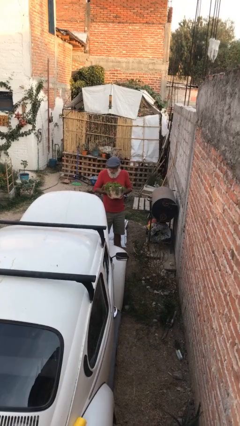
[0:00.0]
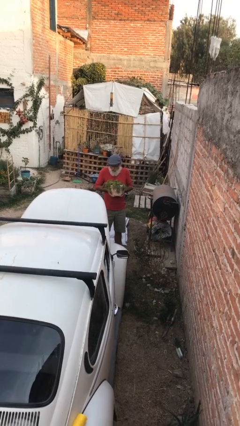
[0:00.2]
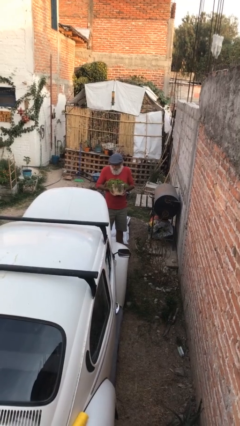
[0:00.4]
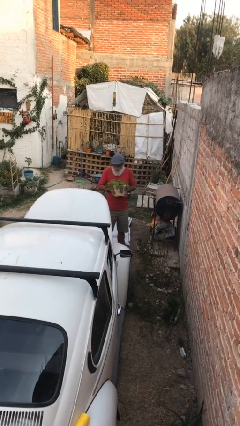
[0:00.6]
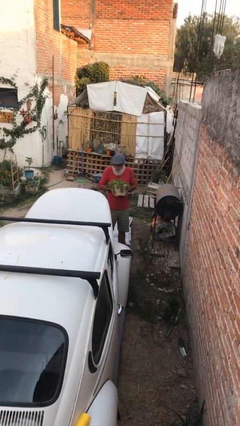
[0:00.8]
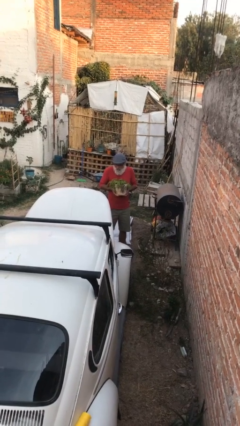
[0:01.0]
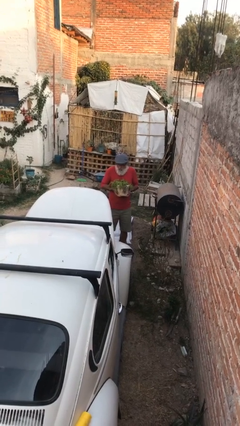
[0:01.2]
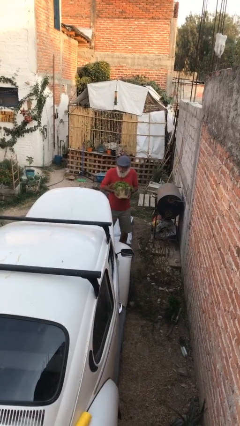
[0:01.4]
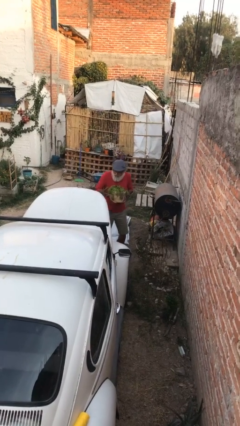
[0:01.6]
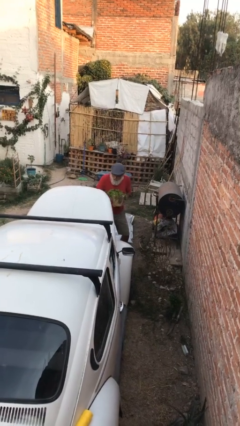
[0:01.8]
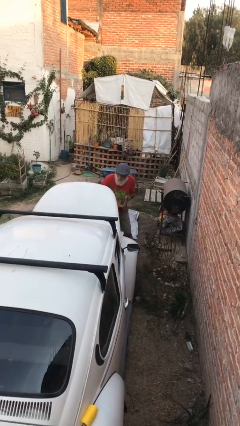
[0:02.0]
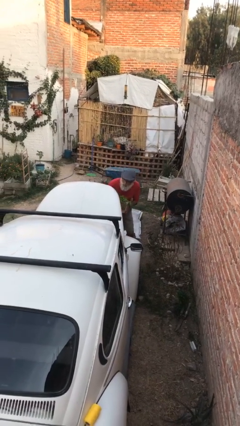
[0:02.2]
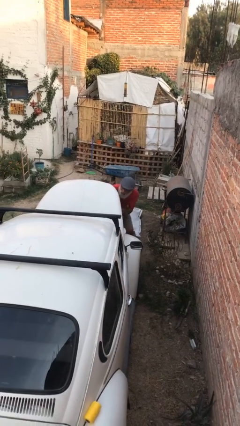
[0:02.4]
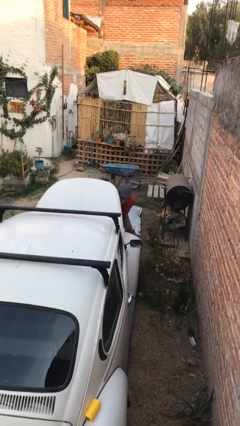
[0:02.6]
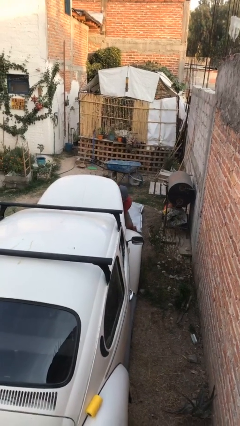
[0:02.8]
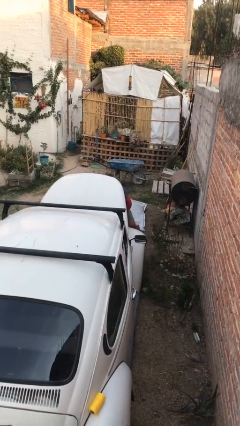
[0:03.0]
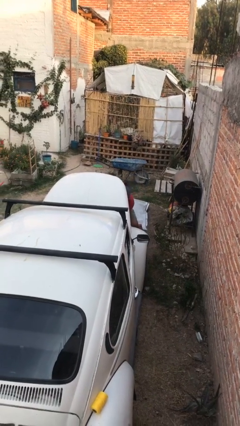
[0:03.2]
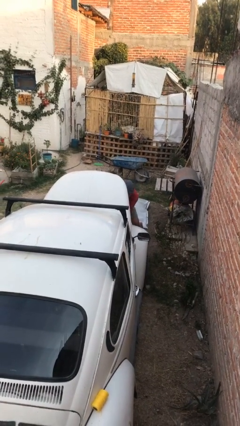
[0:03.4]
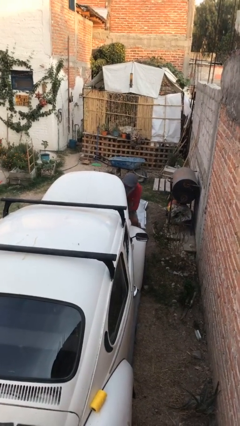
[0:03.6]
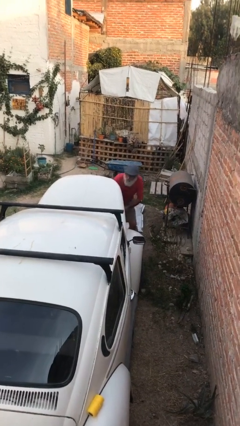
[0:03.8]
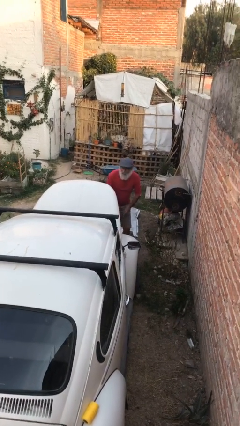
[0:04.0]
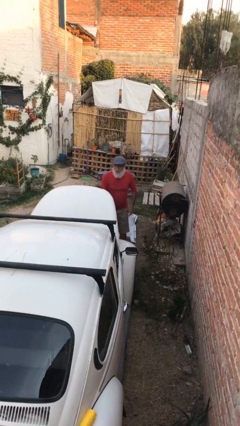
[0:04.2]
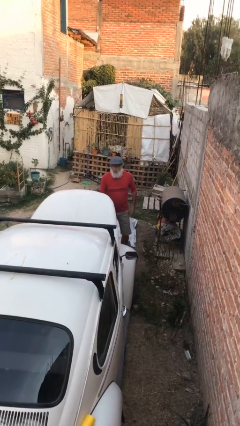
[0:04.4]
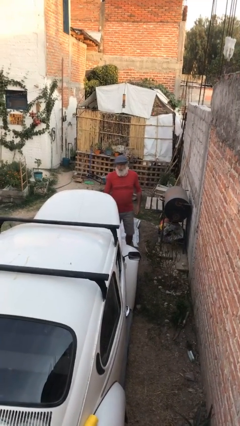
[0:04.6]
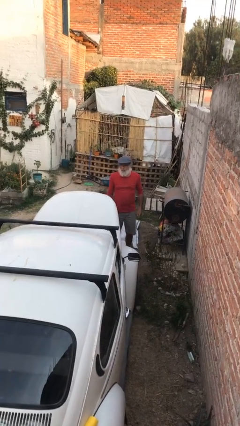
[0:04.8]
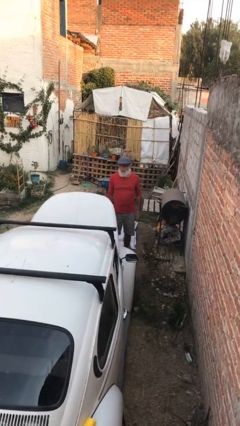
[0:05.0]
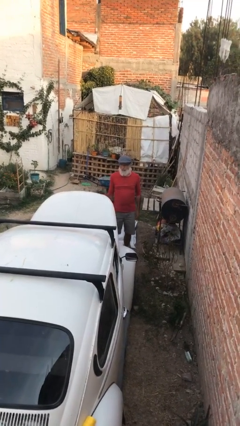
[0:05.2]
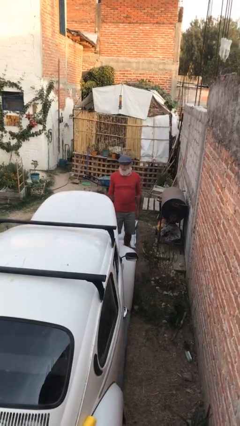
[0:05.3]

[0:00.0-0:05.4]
person loads car

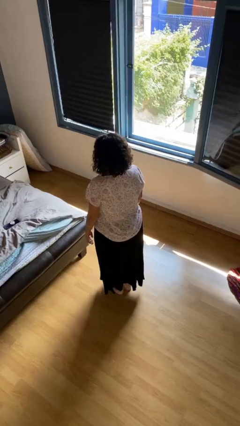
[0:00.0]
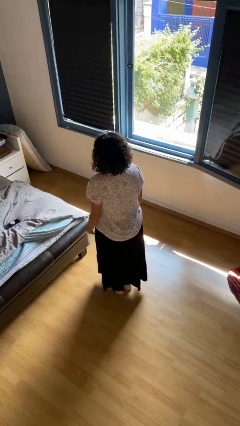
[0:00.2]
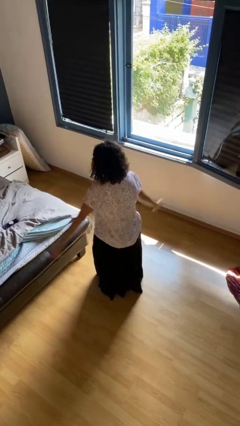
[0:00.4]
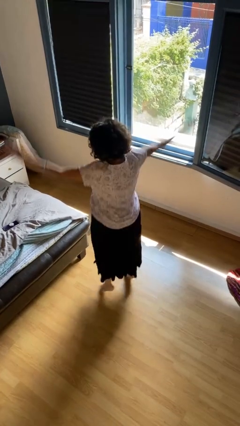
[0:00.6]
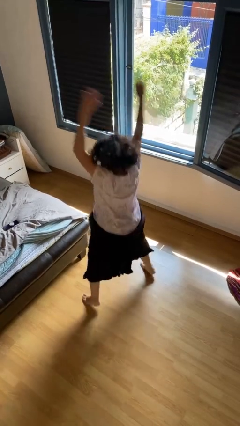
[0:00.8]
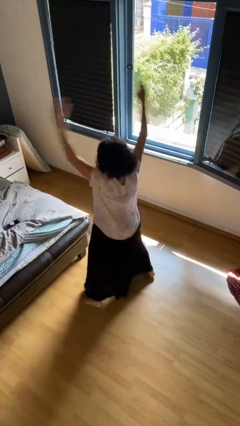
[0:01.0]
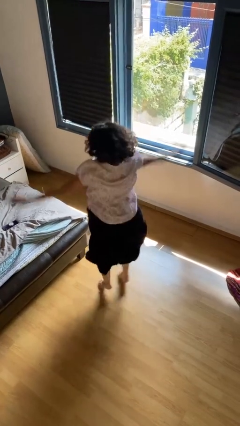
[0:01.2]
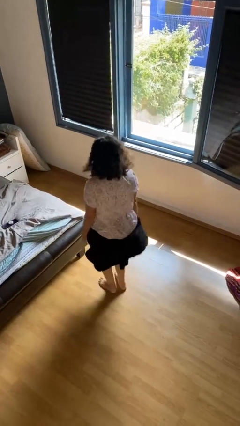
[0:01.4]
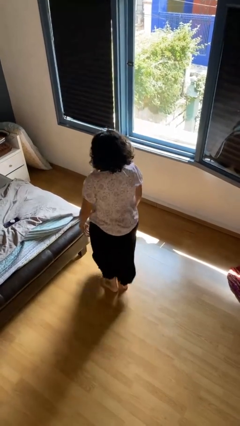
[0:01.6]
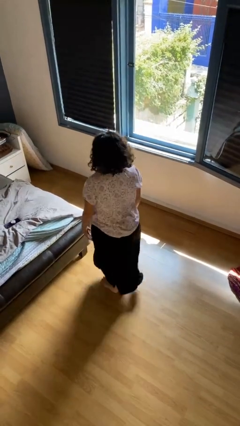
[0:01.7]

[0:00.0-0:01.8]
person exercises with jumping jacks

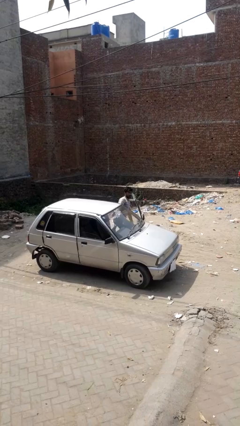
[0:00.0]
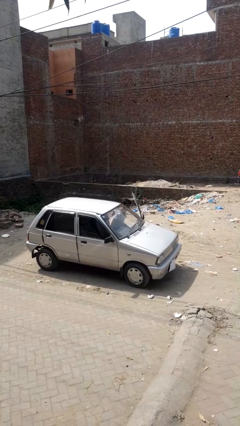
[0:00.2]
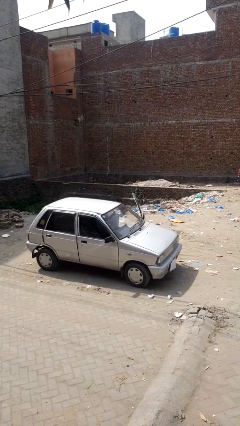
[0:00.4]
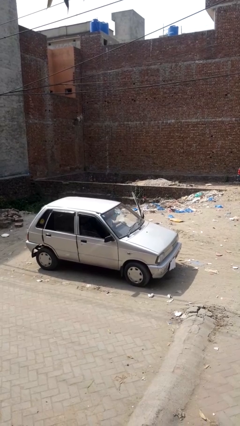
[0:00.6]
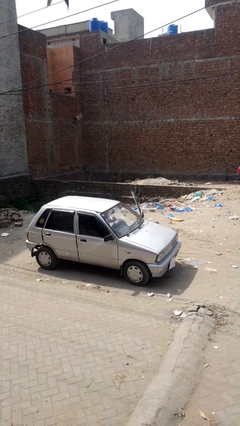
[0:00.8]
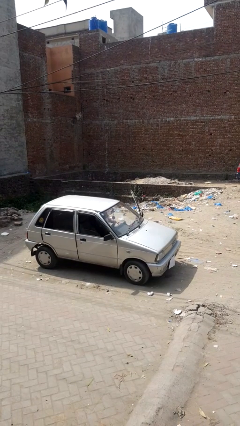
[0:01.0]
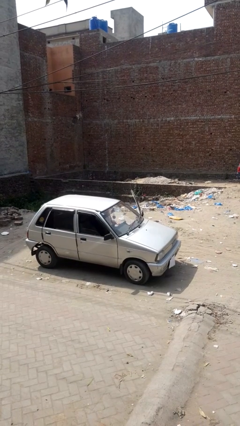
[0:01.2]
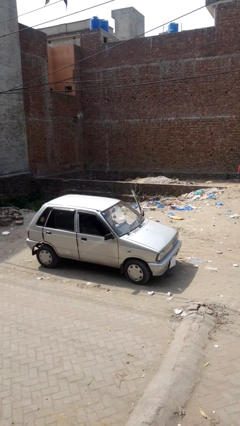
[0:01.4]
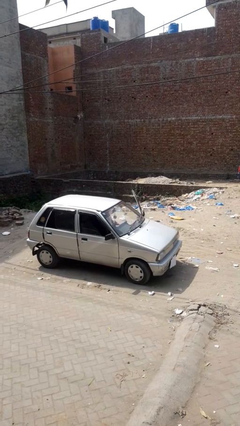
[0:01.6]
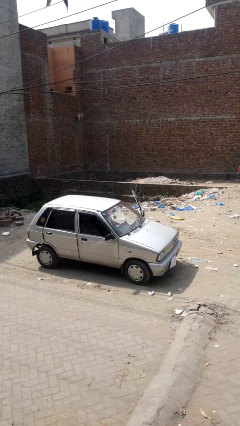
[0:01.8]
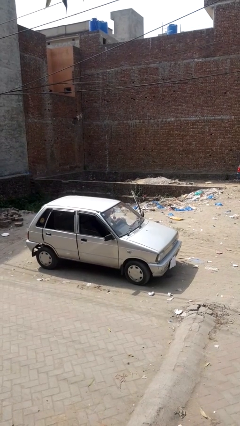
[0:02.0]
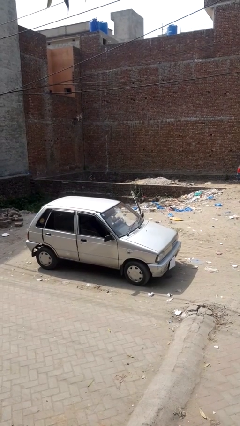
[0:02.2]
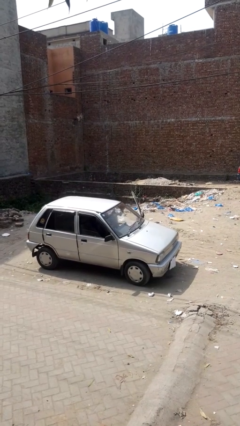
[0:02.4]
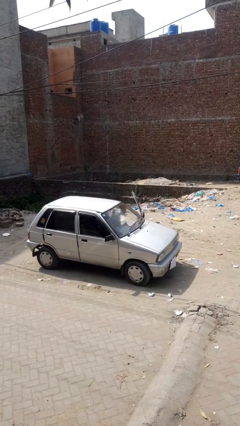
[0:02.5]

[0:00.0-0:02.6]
person enters car

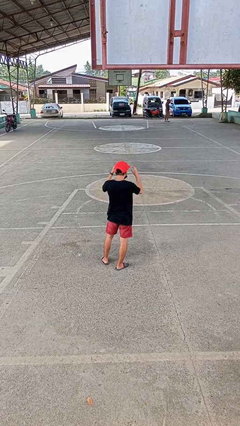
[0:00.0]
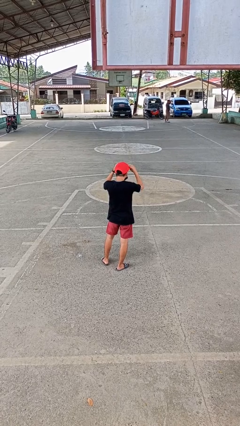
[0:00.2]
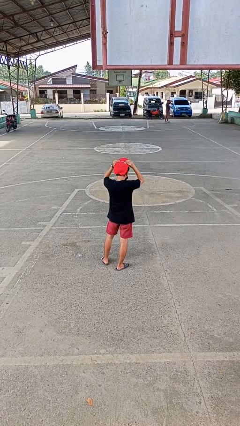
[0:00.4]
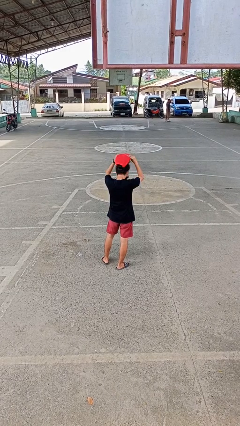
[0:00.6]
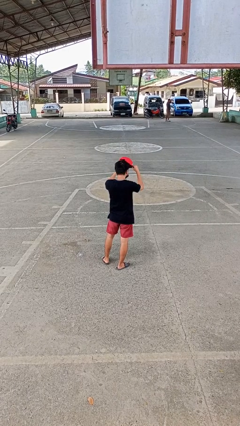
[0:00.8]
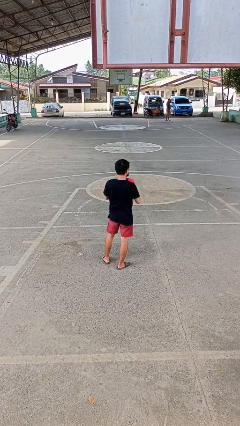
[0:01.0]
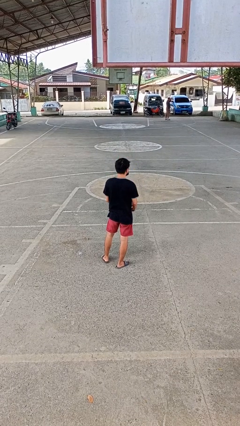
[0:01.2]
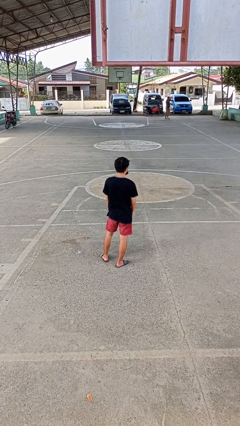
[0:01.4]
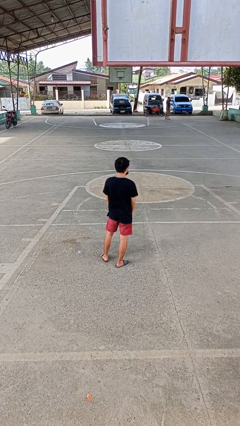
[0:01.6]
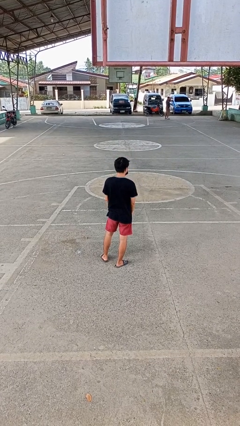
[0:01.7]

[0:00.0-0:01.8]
person takes off hat

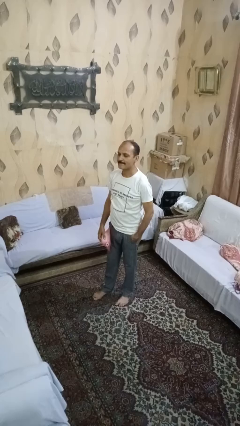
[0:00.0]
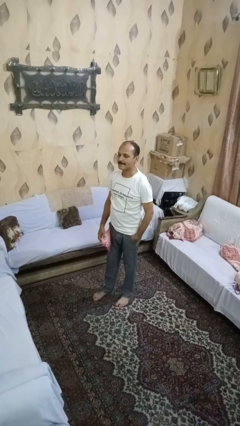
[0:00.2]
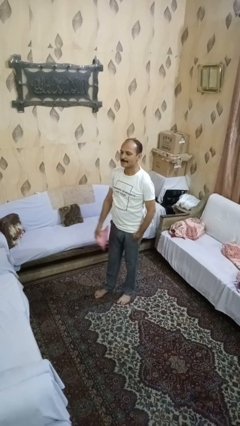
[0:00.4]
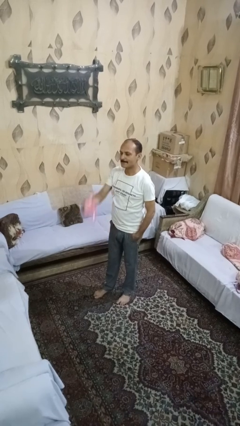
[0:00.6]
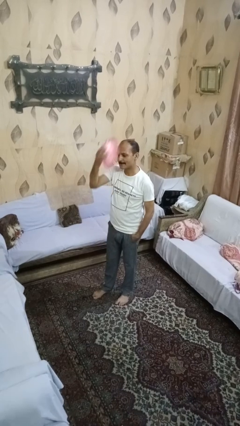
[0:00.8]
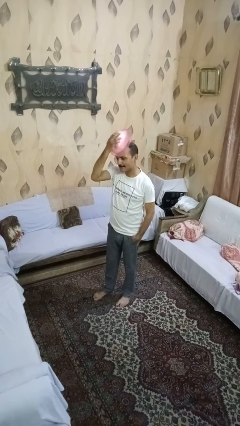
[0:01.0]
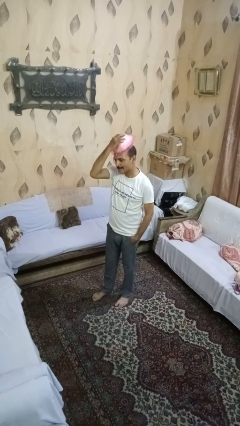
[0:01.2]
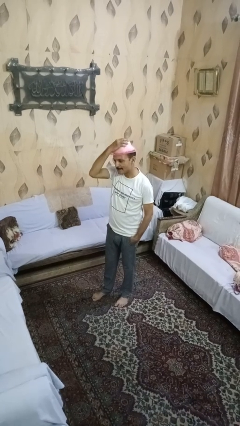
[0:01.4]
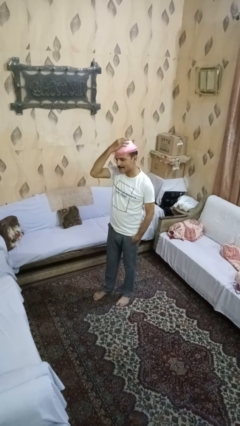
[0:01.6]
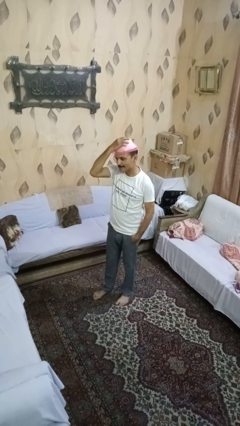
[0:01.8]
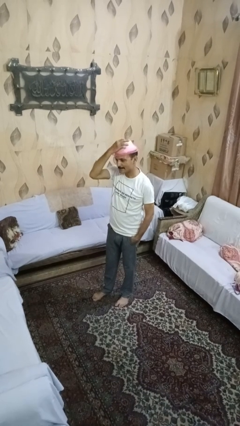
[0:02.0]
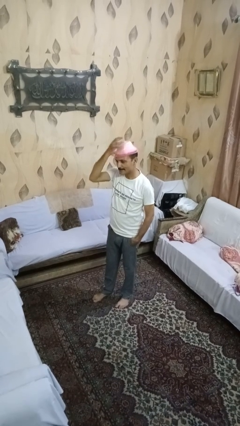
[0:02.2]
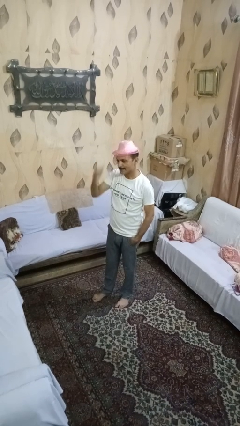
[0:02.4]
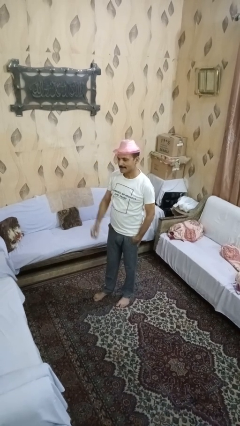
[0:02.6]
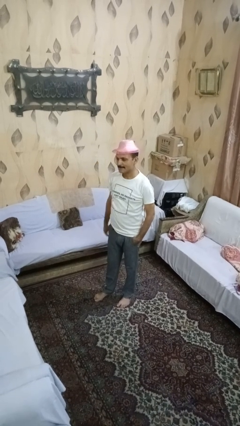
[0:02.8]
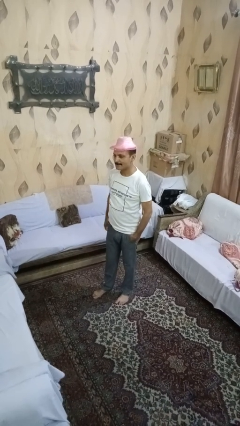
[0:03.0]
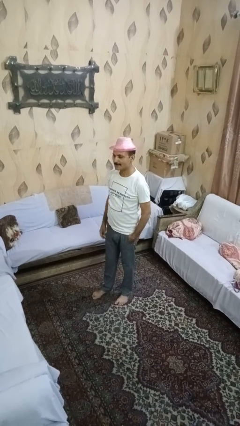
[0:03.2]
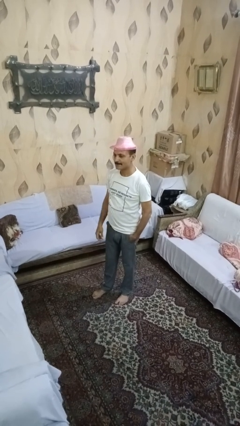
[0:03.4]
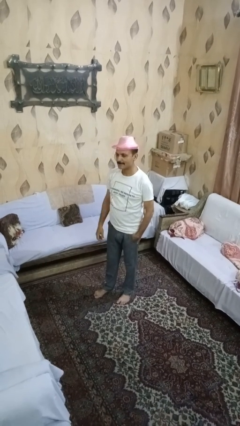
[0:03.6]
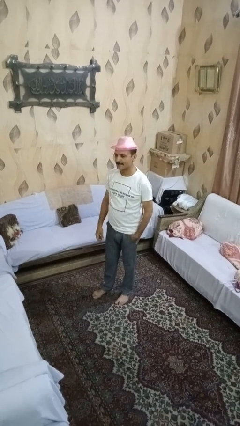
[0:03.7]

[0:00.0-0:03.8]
person puts on hat

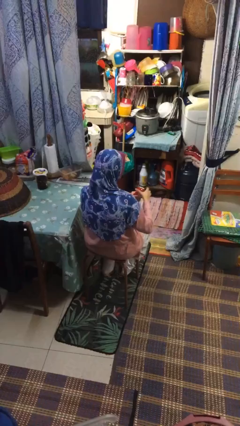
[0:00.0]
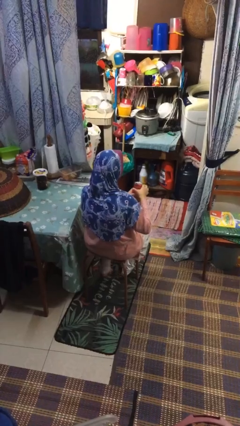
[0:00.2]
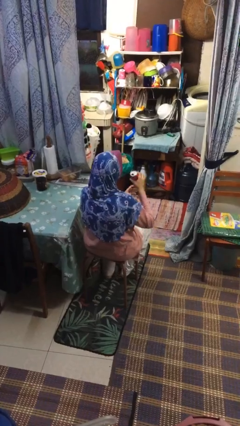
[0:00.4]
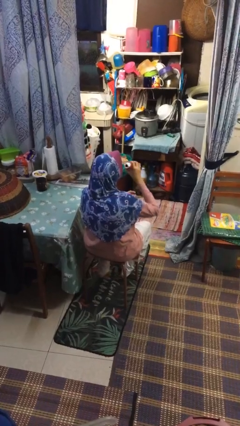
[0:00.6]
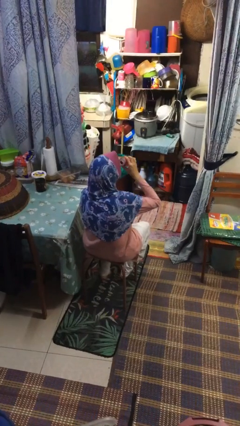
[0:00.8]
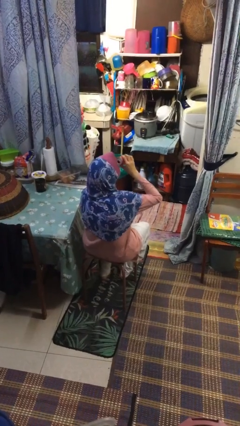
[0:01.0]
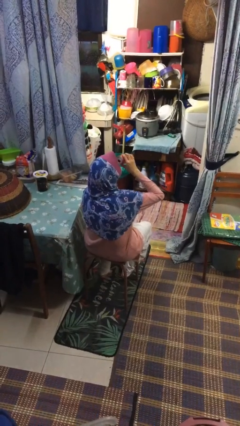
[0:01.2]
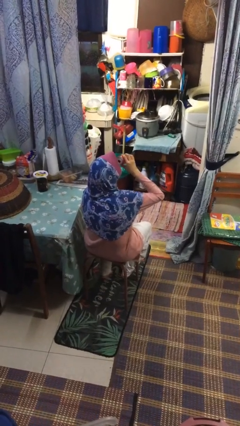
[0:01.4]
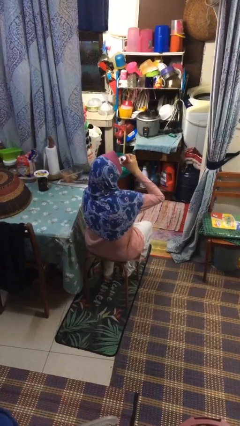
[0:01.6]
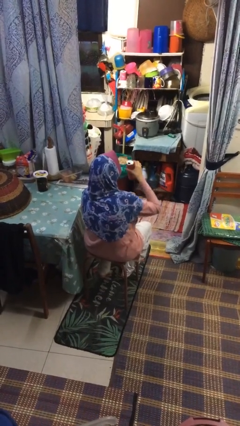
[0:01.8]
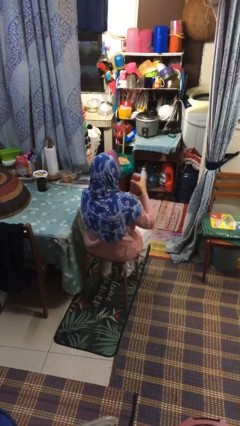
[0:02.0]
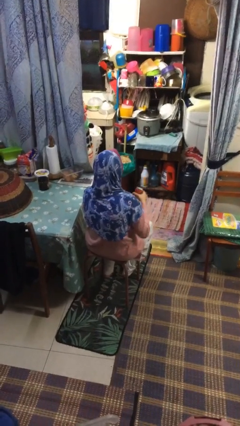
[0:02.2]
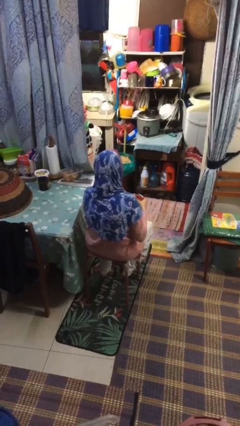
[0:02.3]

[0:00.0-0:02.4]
person drinks from beverage can
